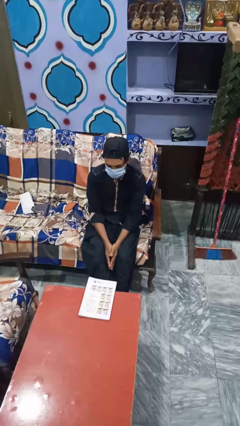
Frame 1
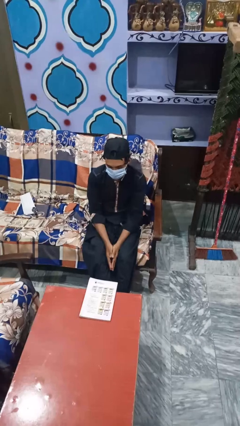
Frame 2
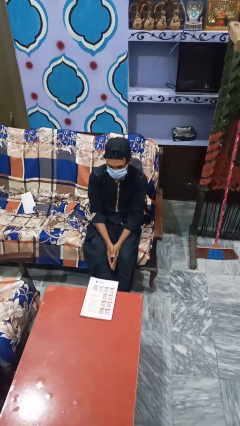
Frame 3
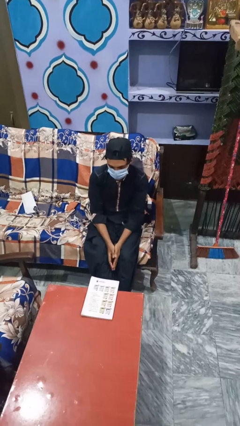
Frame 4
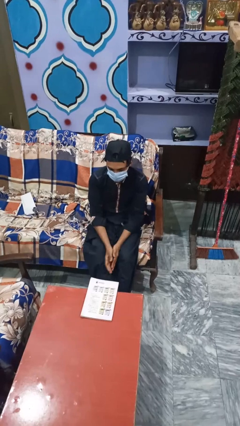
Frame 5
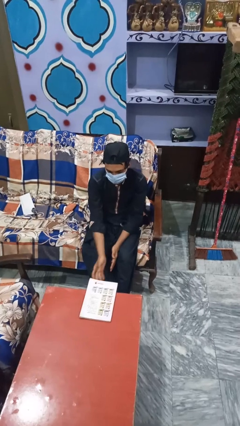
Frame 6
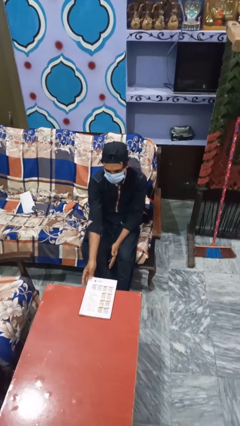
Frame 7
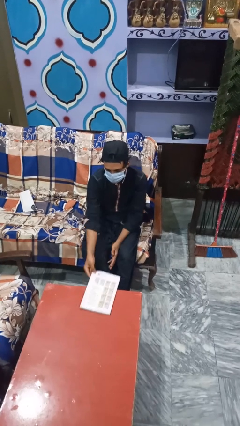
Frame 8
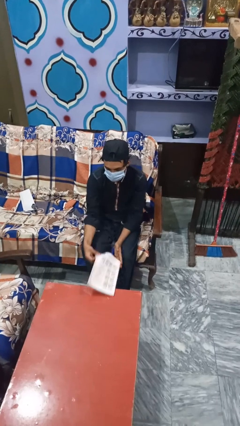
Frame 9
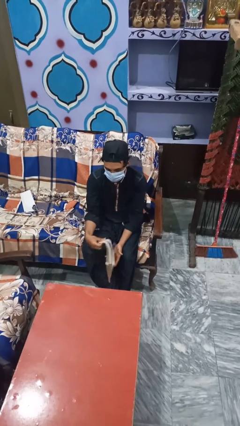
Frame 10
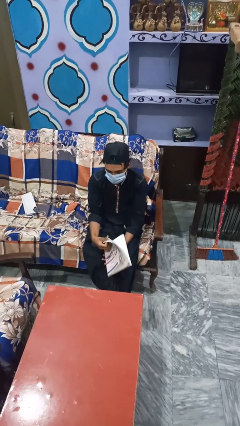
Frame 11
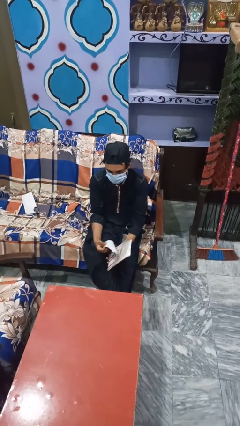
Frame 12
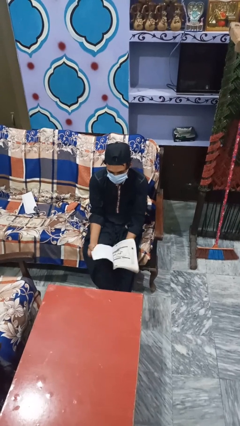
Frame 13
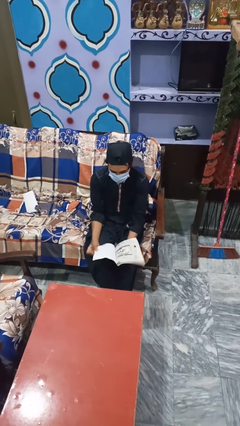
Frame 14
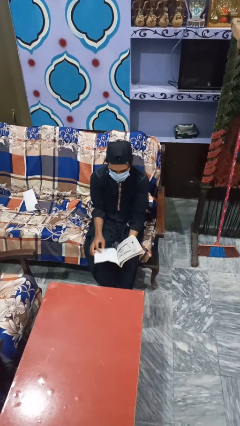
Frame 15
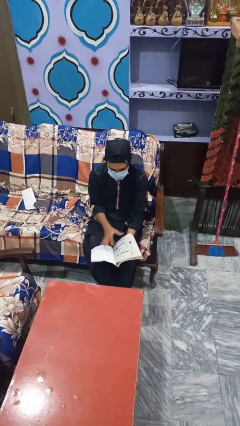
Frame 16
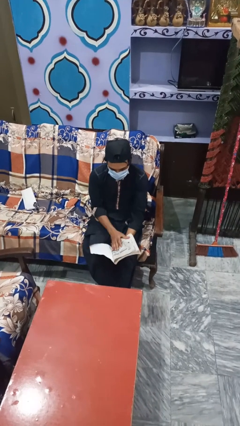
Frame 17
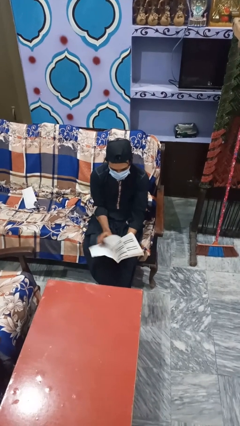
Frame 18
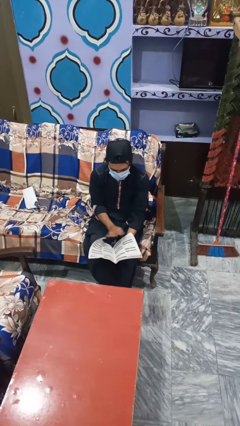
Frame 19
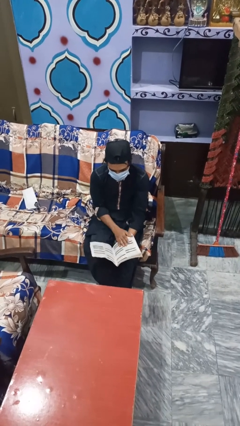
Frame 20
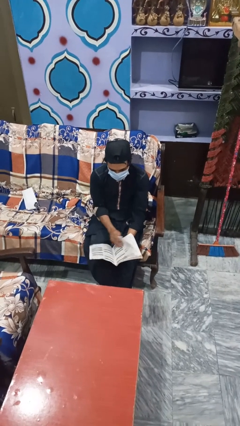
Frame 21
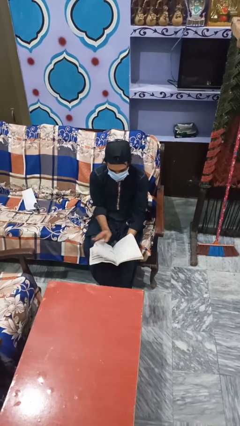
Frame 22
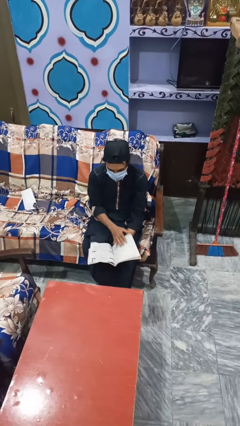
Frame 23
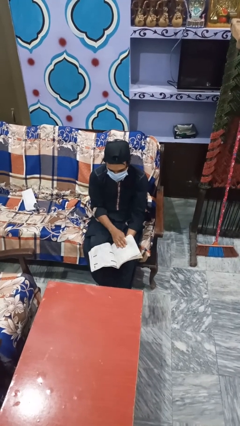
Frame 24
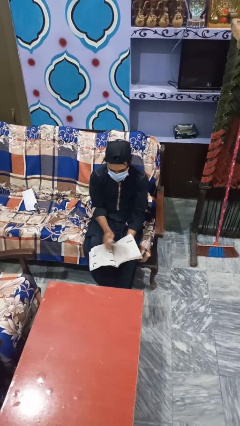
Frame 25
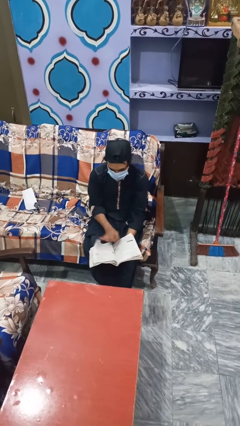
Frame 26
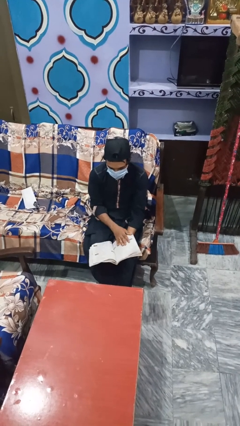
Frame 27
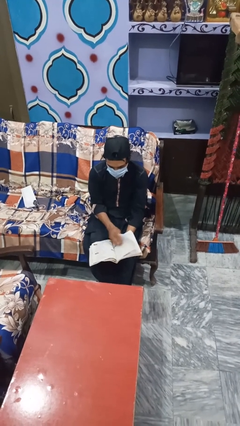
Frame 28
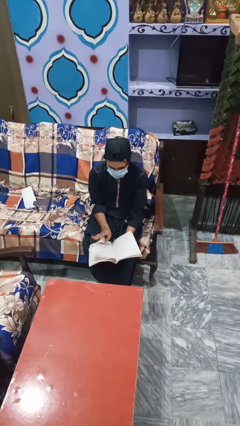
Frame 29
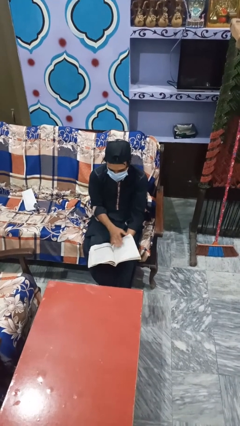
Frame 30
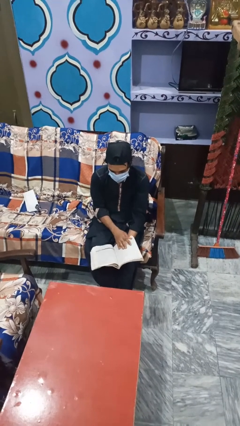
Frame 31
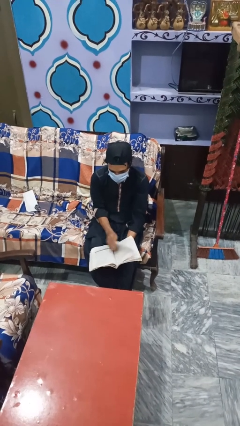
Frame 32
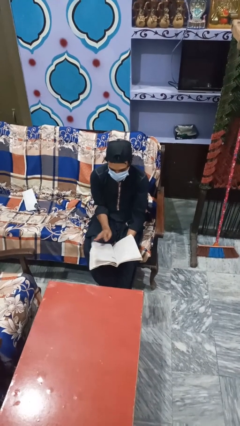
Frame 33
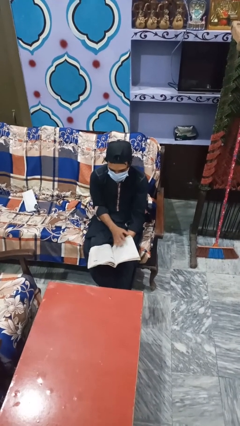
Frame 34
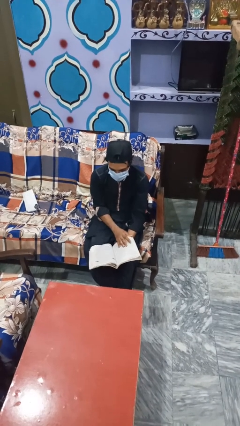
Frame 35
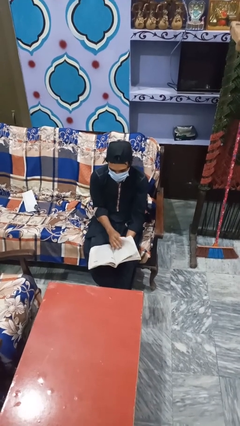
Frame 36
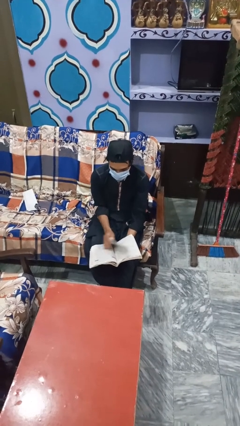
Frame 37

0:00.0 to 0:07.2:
person reads magazine

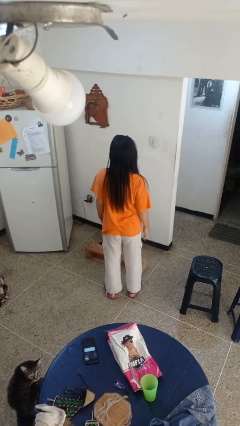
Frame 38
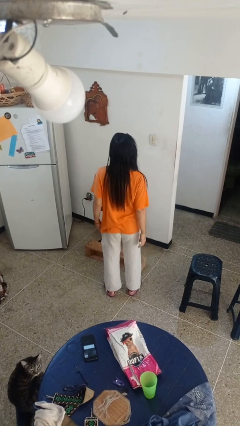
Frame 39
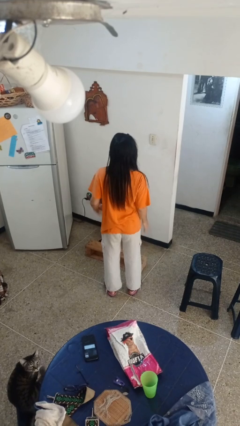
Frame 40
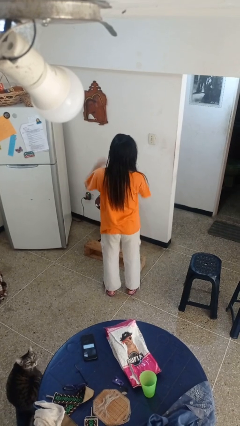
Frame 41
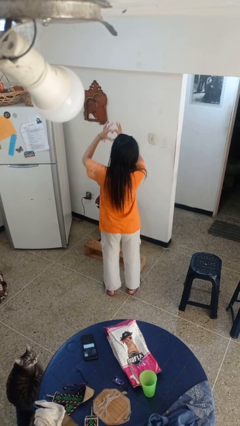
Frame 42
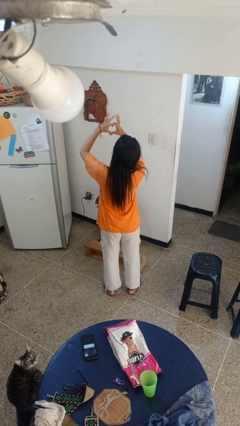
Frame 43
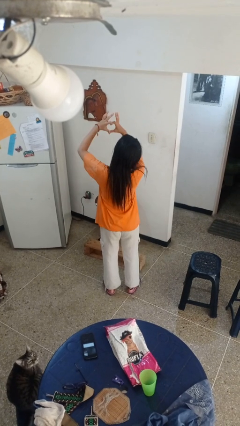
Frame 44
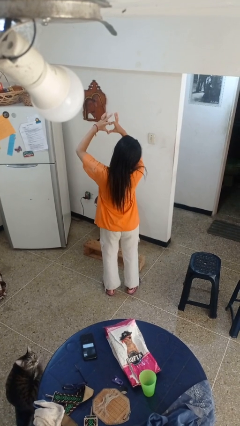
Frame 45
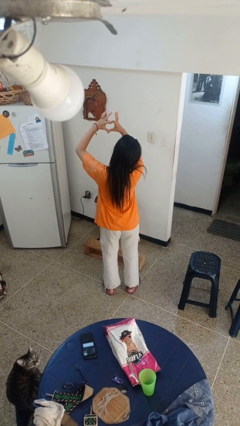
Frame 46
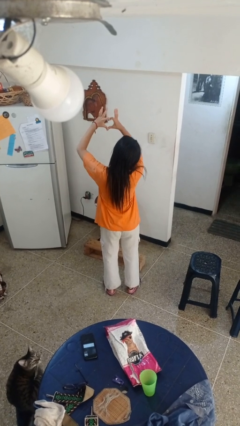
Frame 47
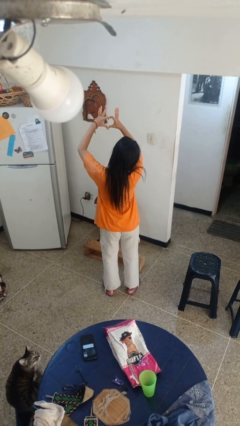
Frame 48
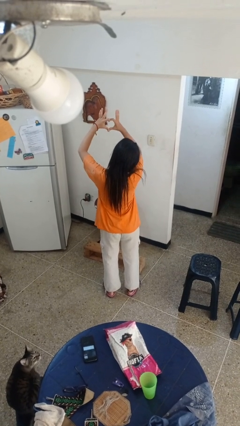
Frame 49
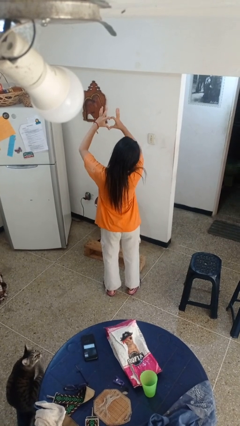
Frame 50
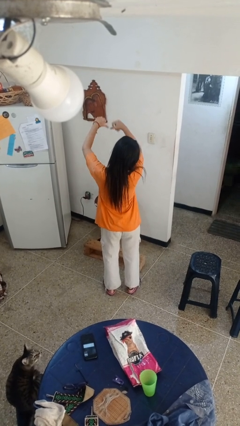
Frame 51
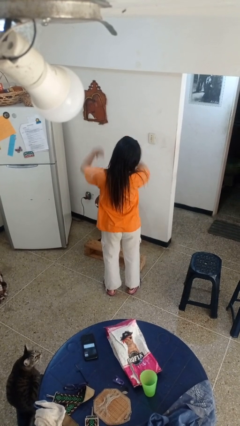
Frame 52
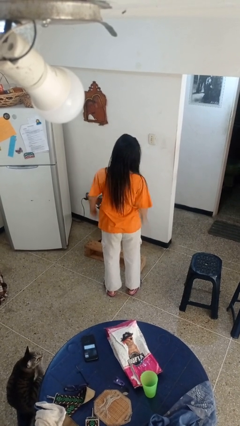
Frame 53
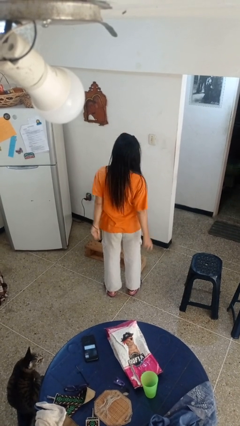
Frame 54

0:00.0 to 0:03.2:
person gestures heart

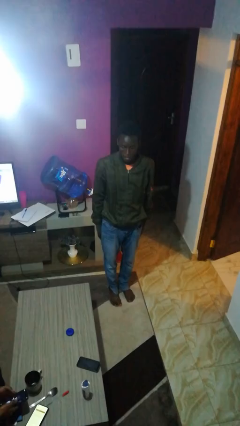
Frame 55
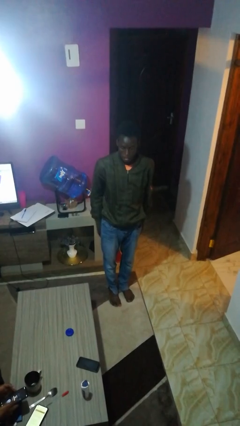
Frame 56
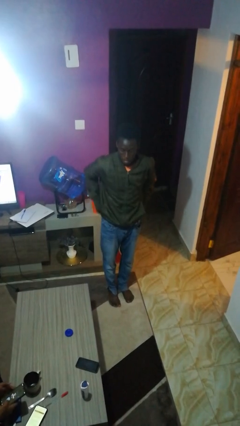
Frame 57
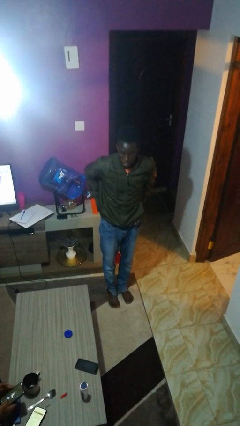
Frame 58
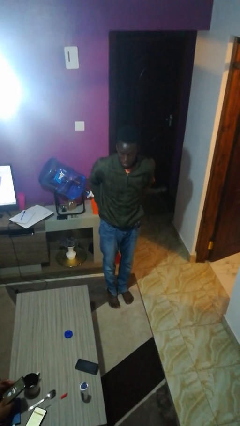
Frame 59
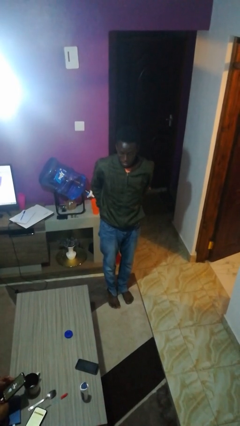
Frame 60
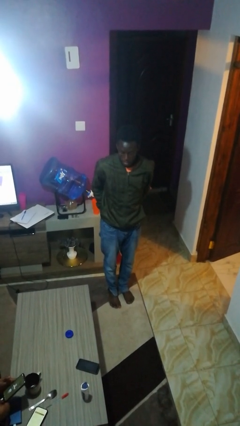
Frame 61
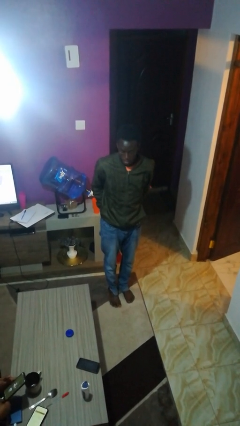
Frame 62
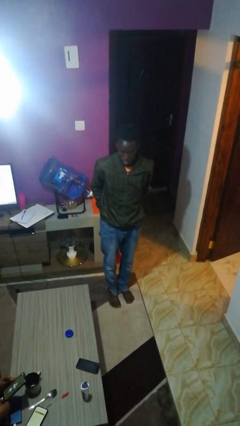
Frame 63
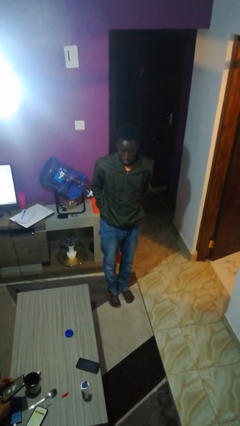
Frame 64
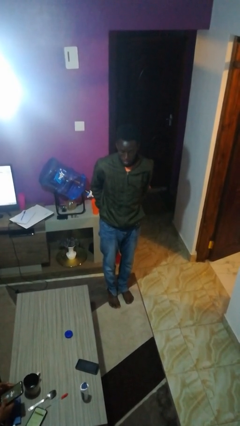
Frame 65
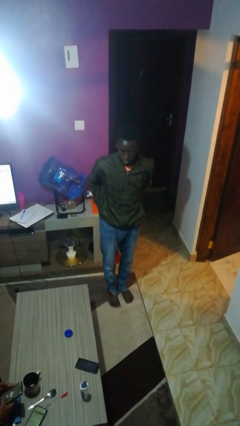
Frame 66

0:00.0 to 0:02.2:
person puts hands in back pockets

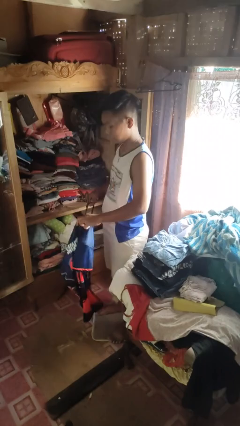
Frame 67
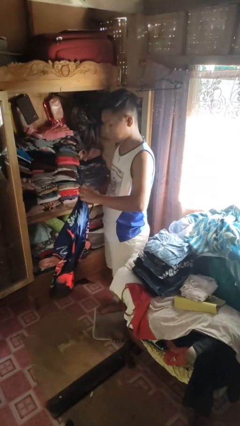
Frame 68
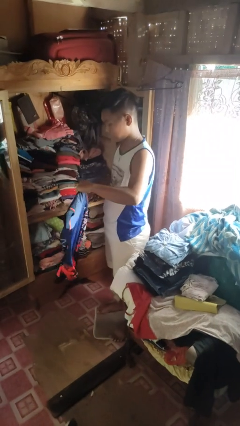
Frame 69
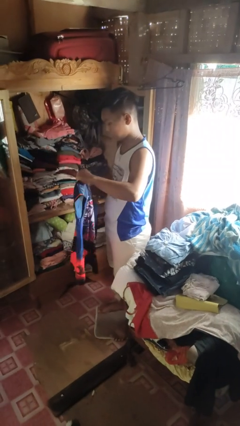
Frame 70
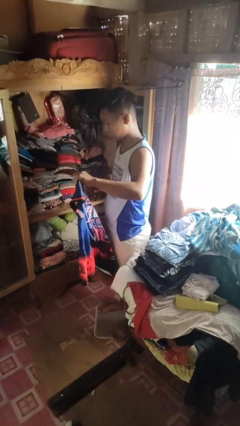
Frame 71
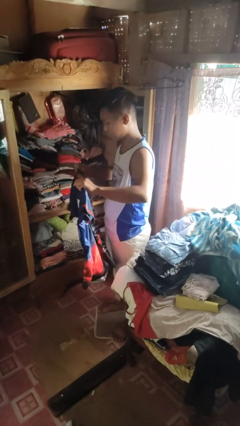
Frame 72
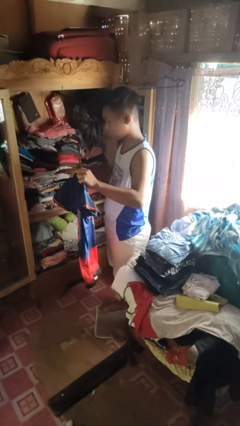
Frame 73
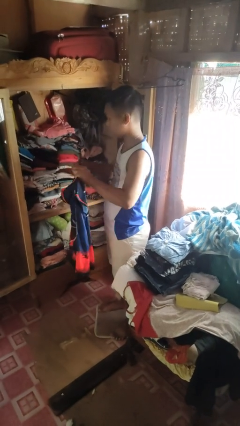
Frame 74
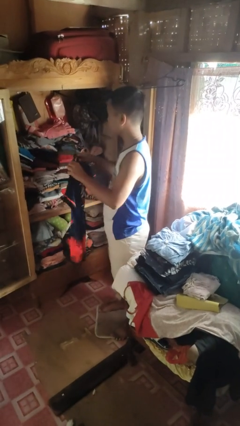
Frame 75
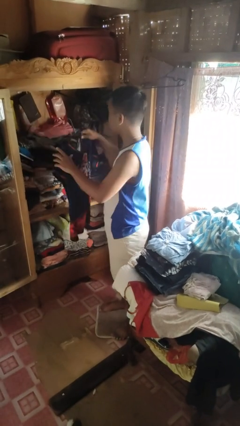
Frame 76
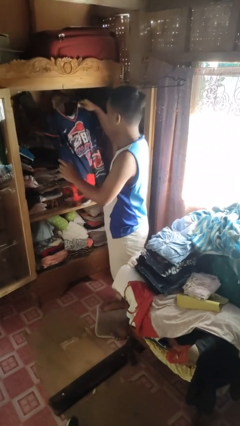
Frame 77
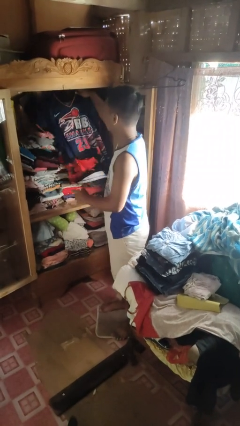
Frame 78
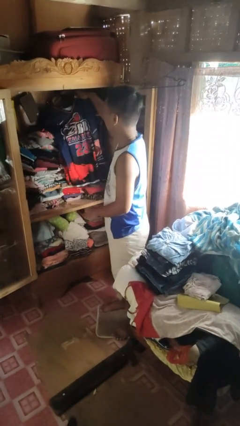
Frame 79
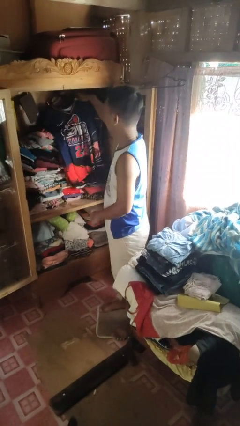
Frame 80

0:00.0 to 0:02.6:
person puts clothes into closet

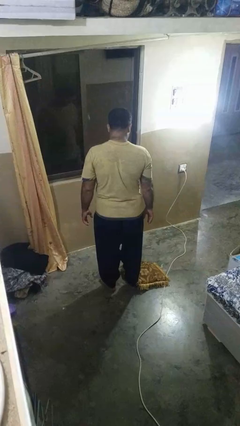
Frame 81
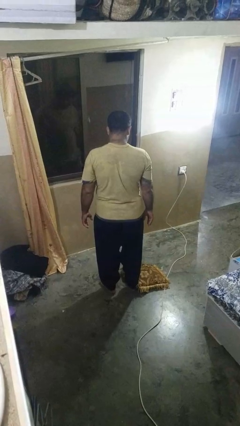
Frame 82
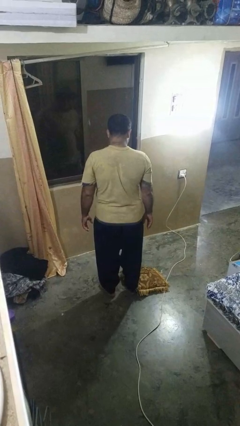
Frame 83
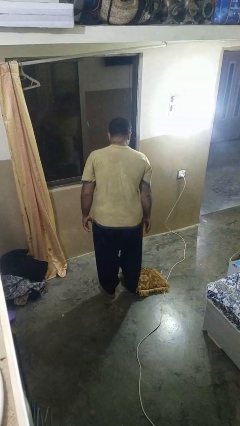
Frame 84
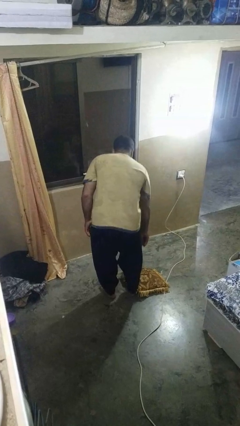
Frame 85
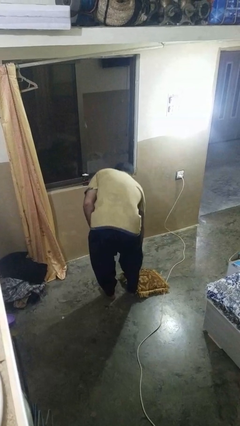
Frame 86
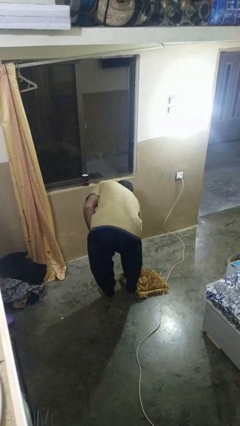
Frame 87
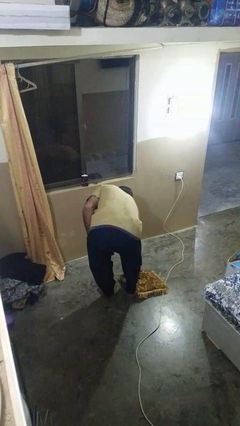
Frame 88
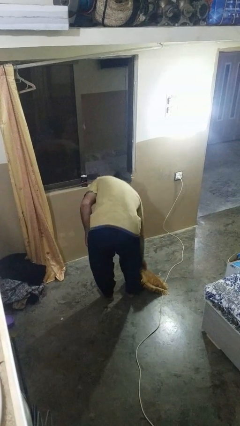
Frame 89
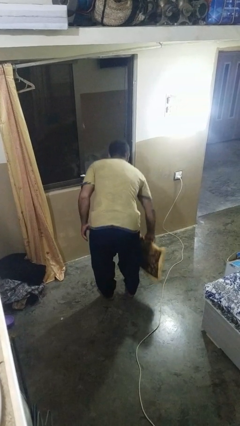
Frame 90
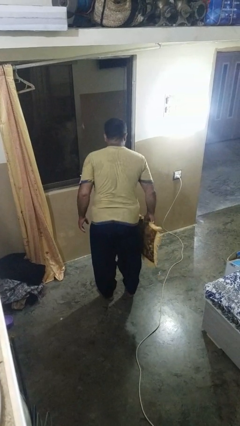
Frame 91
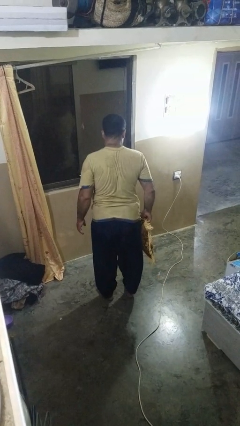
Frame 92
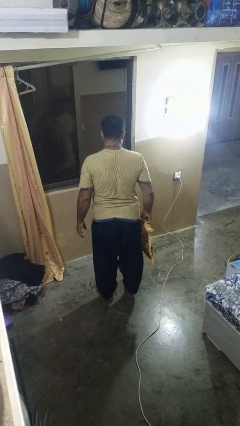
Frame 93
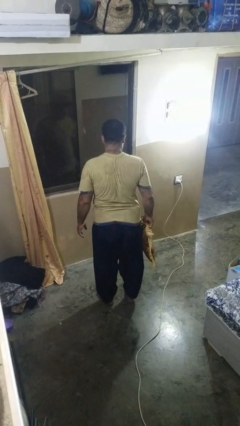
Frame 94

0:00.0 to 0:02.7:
person picks up object from floor
